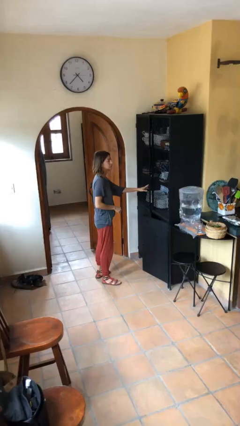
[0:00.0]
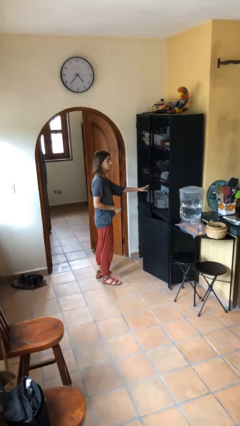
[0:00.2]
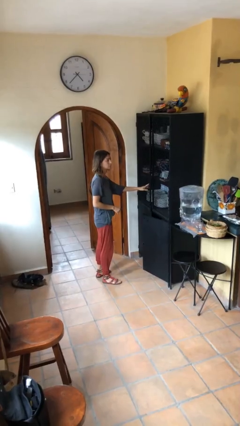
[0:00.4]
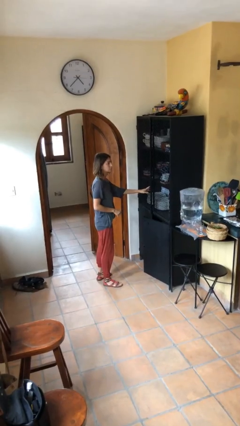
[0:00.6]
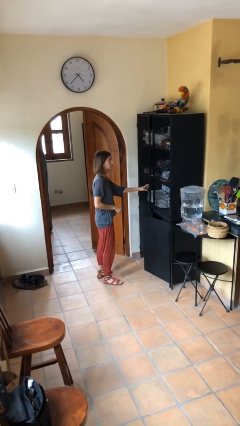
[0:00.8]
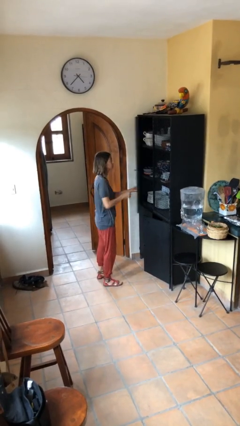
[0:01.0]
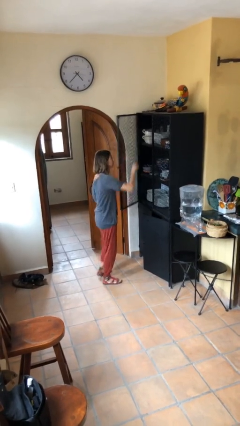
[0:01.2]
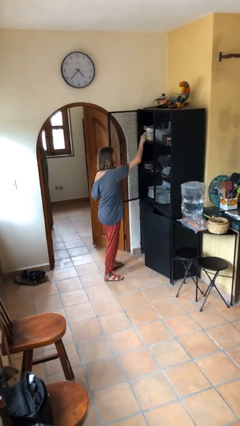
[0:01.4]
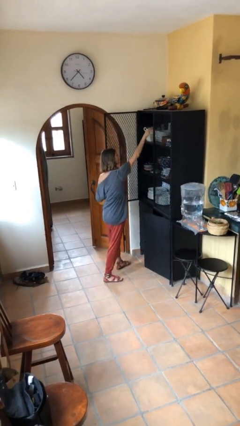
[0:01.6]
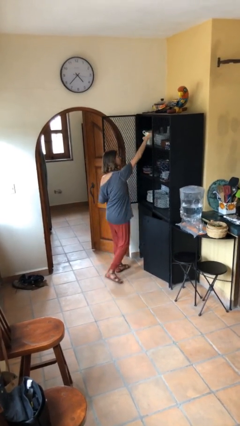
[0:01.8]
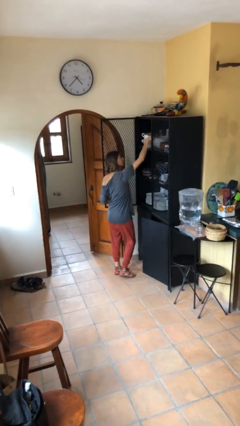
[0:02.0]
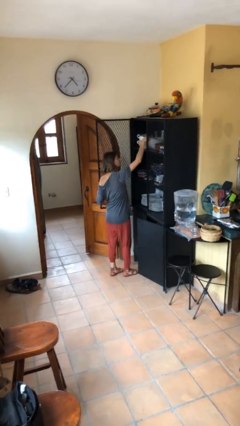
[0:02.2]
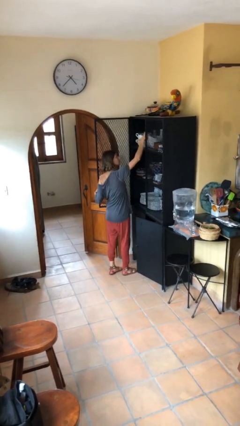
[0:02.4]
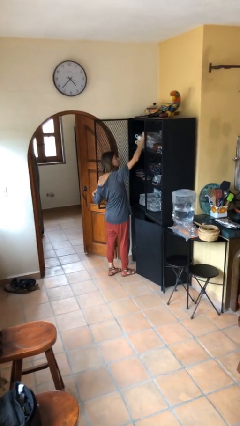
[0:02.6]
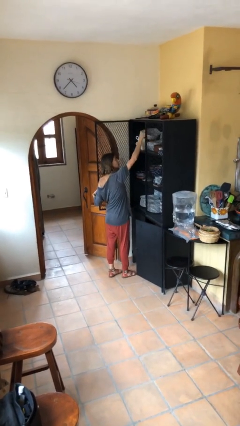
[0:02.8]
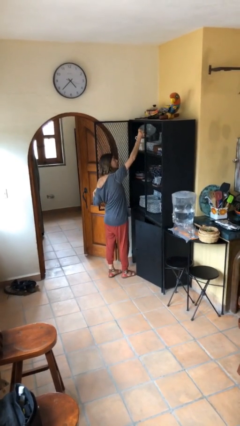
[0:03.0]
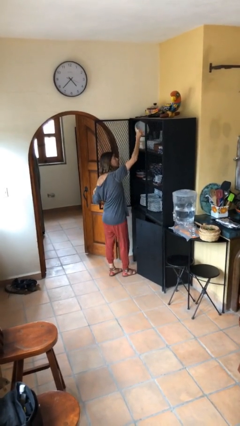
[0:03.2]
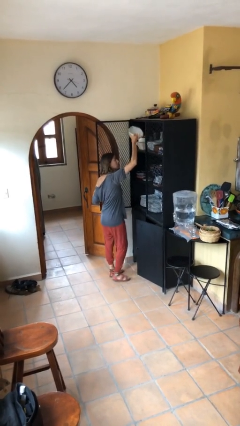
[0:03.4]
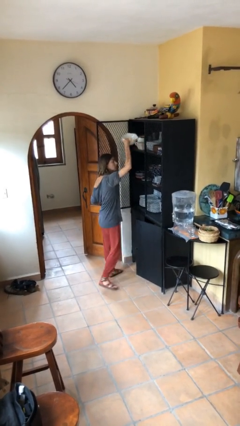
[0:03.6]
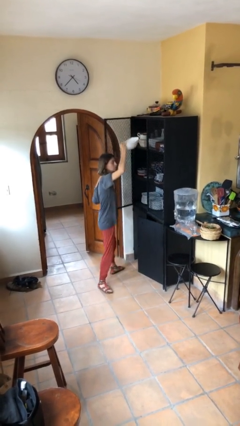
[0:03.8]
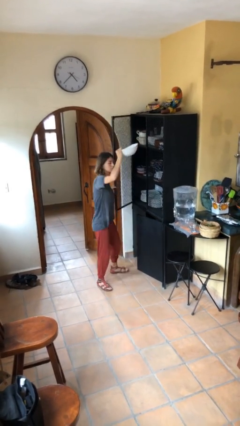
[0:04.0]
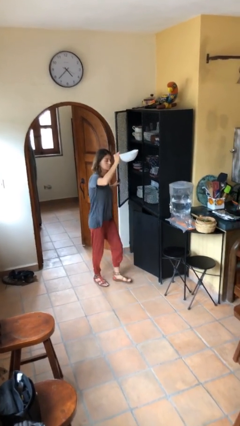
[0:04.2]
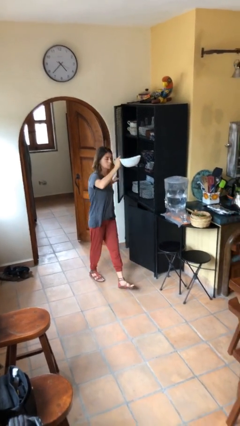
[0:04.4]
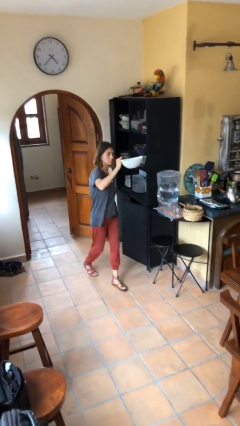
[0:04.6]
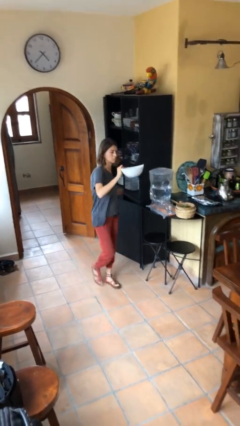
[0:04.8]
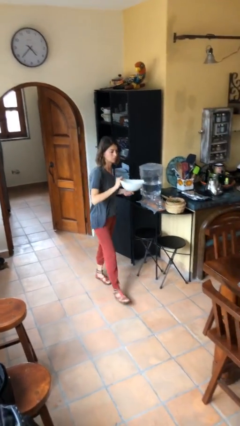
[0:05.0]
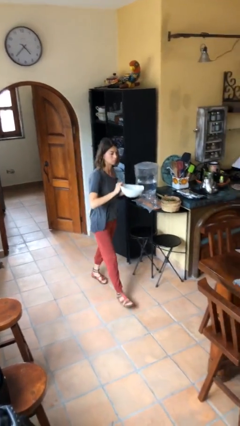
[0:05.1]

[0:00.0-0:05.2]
person picks up object from shelf

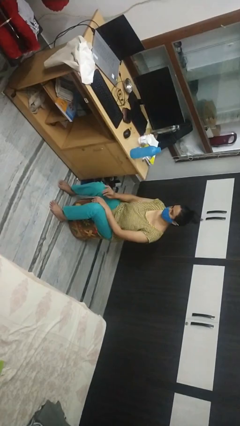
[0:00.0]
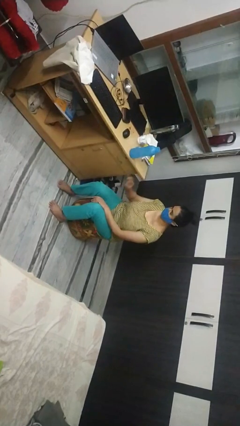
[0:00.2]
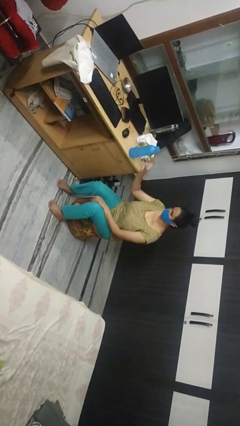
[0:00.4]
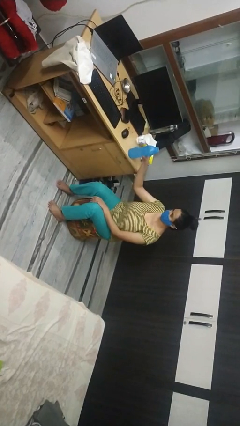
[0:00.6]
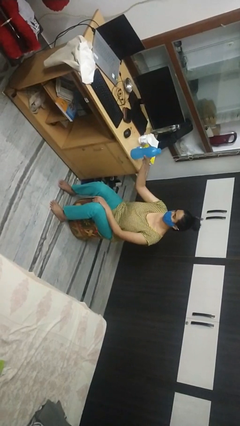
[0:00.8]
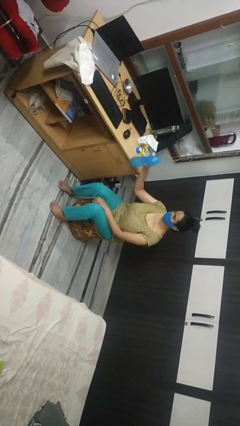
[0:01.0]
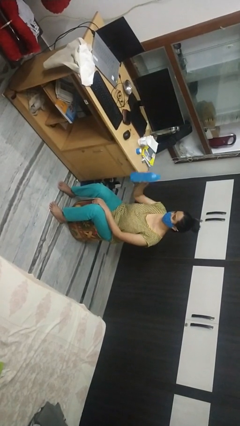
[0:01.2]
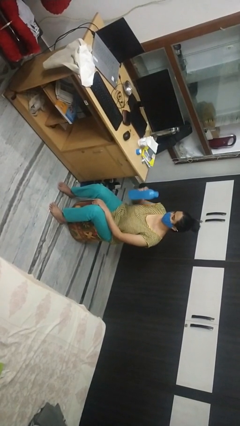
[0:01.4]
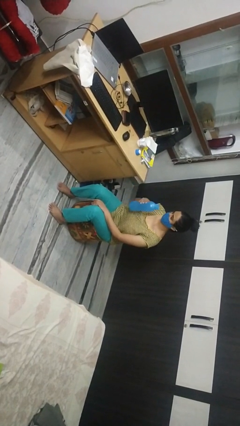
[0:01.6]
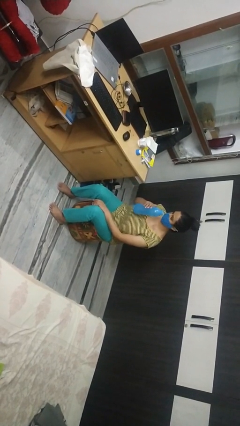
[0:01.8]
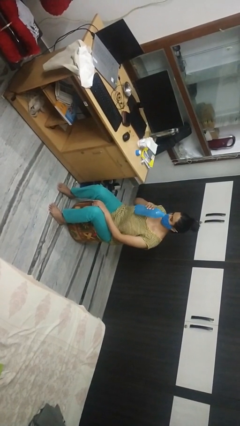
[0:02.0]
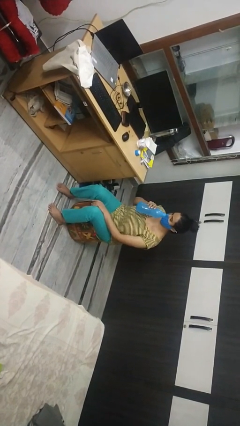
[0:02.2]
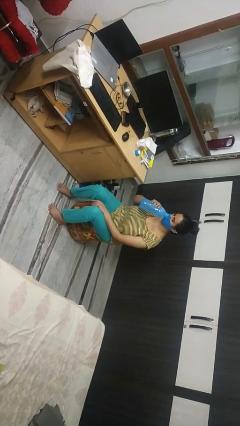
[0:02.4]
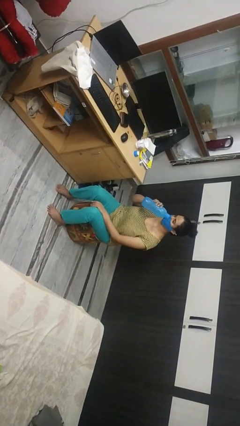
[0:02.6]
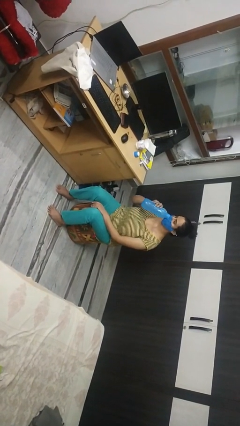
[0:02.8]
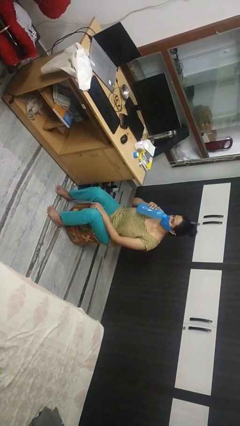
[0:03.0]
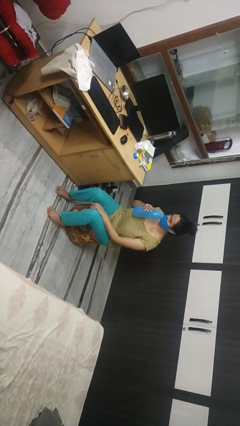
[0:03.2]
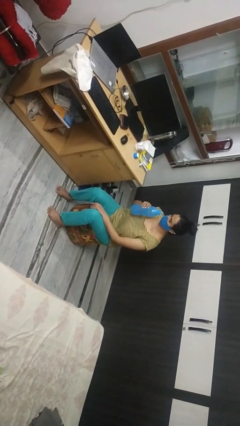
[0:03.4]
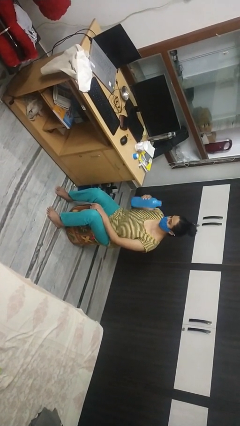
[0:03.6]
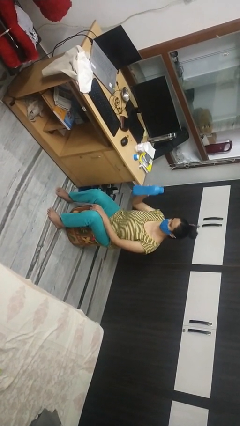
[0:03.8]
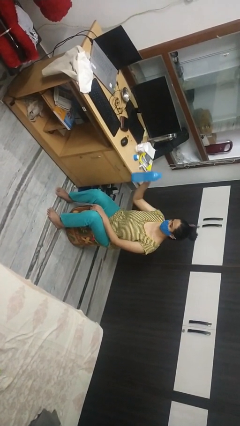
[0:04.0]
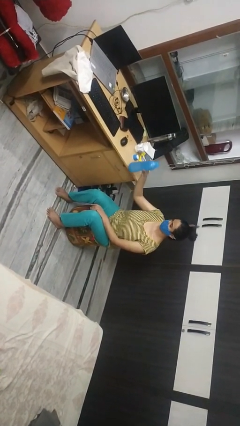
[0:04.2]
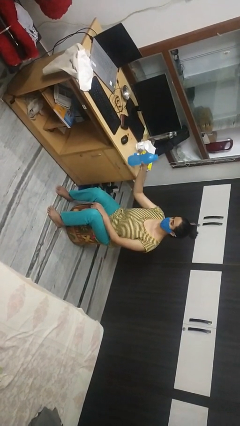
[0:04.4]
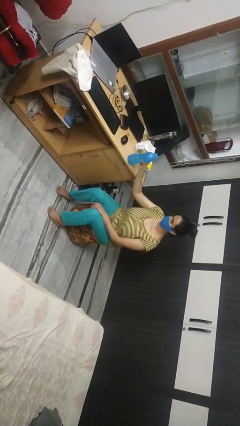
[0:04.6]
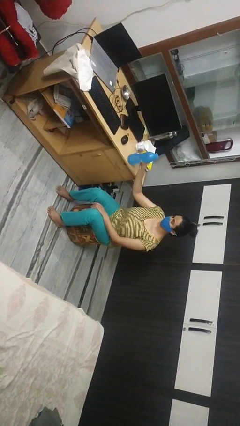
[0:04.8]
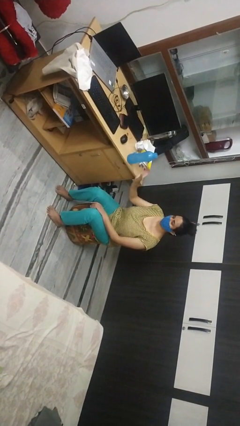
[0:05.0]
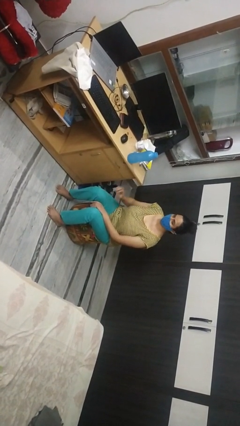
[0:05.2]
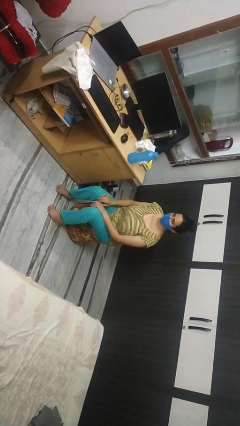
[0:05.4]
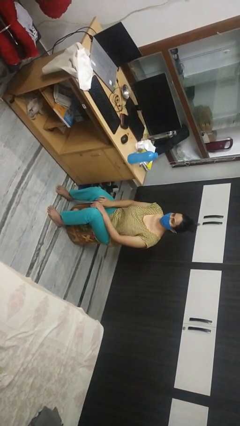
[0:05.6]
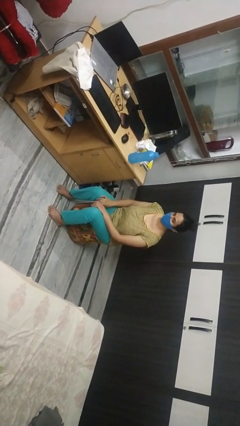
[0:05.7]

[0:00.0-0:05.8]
person drinks from bottle

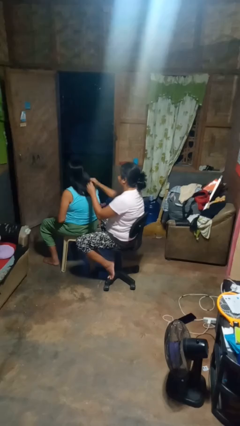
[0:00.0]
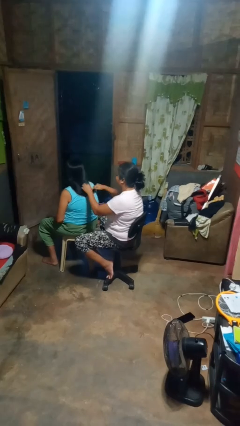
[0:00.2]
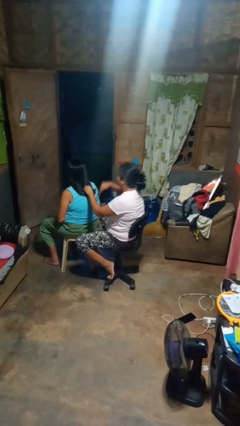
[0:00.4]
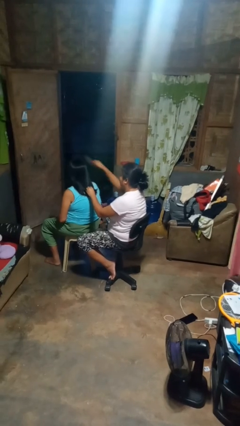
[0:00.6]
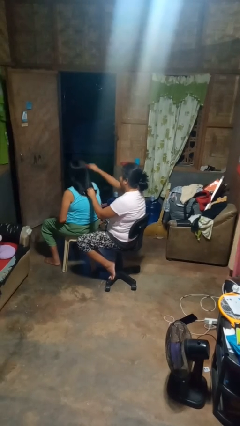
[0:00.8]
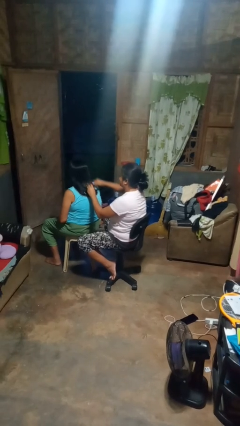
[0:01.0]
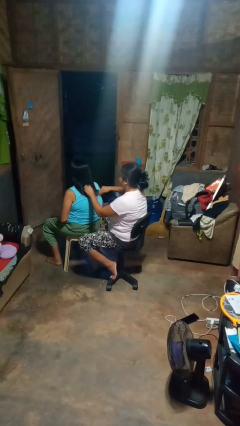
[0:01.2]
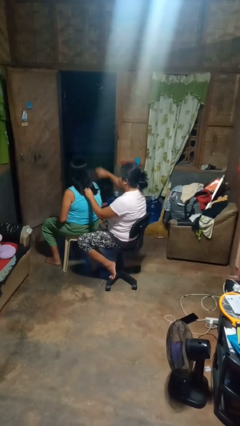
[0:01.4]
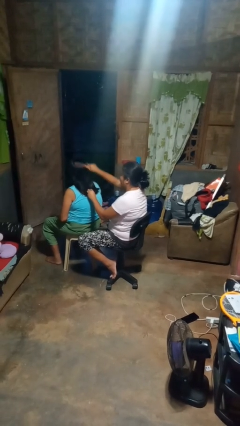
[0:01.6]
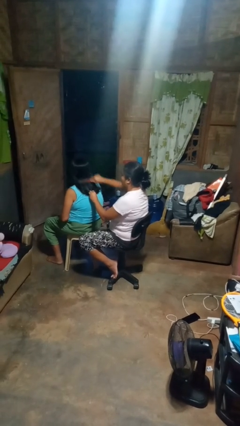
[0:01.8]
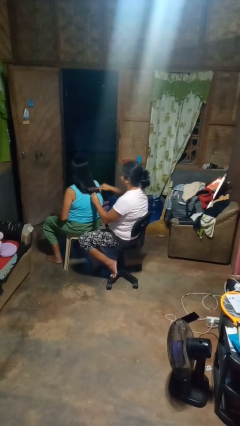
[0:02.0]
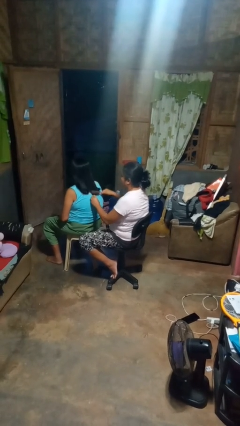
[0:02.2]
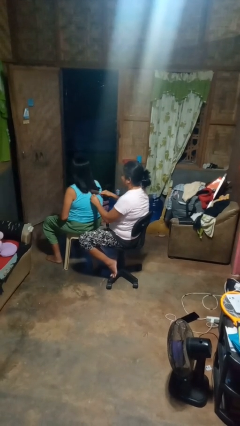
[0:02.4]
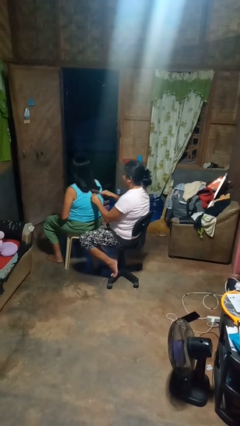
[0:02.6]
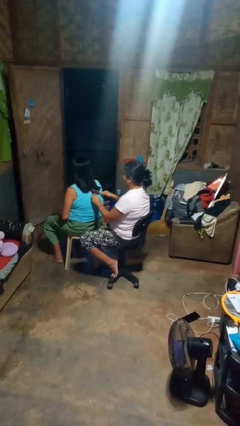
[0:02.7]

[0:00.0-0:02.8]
person brushes hair of person

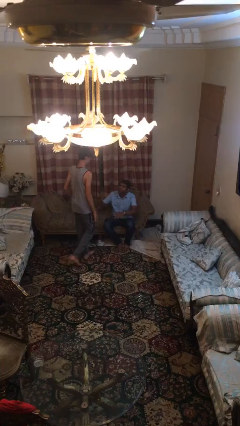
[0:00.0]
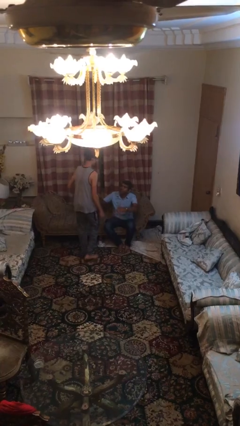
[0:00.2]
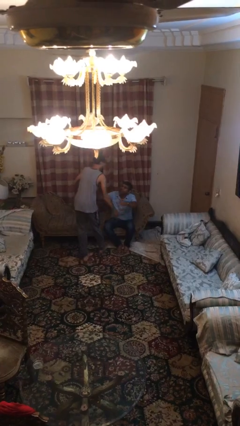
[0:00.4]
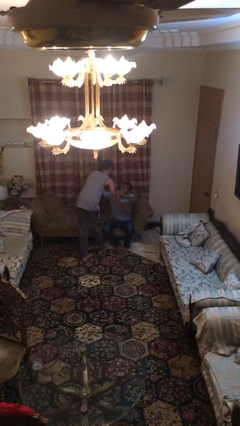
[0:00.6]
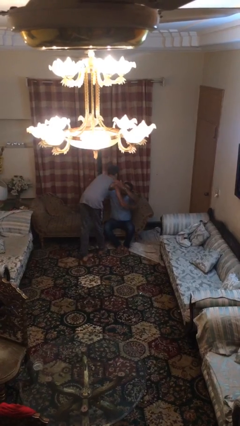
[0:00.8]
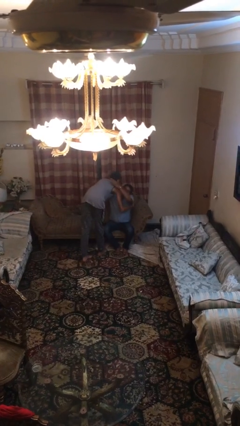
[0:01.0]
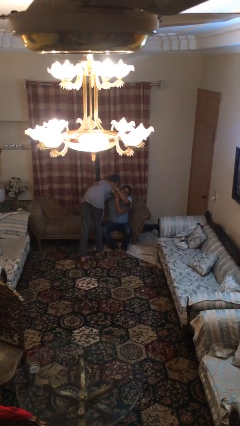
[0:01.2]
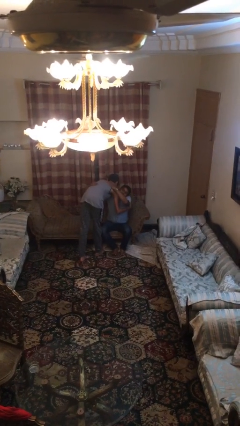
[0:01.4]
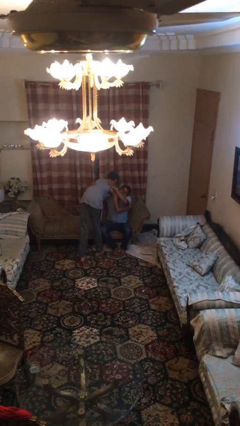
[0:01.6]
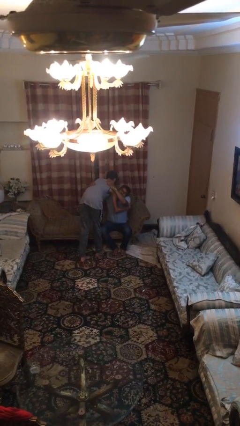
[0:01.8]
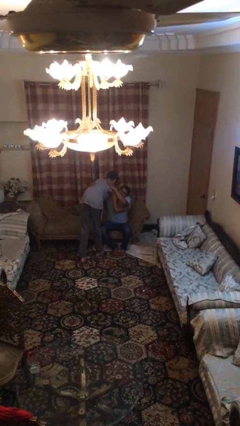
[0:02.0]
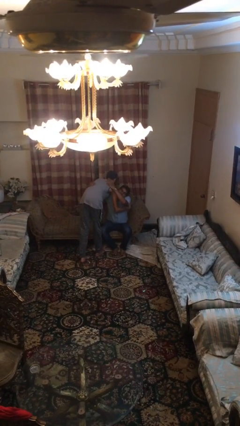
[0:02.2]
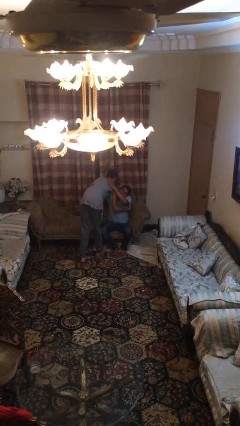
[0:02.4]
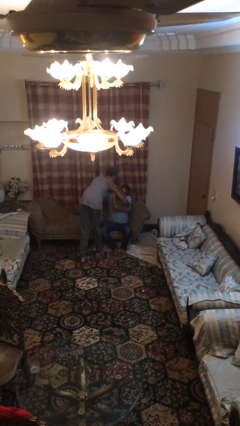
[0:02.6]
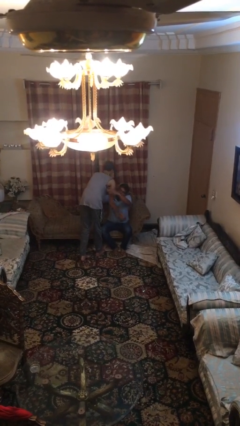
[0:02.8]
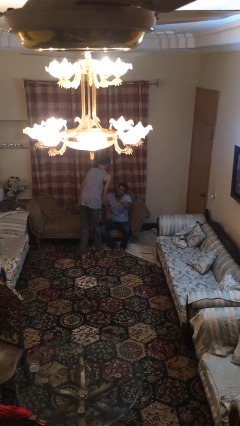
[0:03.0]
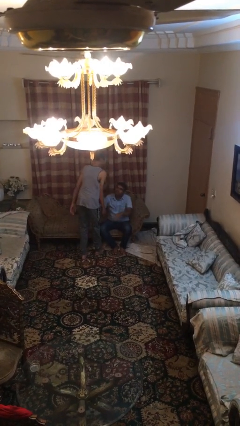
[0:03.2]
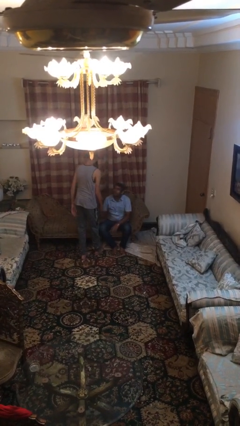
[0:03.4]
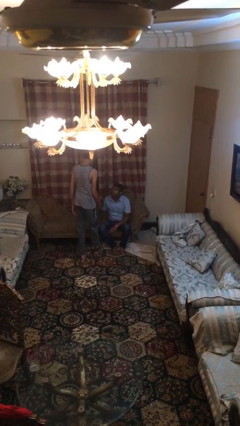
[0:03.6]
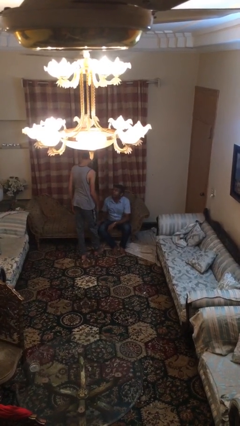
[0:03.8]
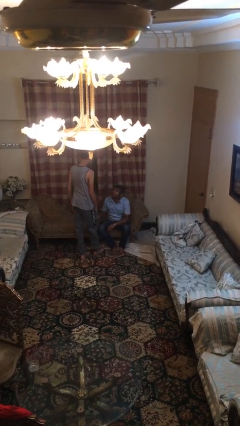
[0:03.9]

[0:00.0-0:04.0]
person embraces person

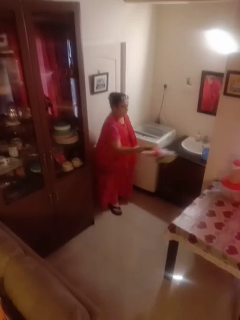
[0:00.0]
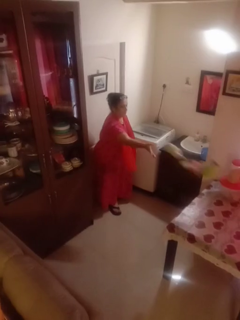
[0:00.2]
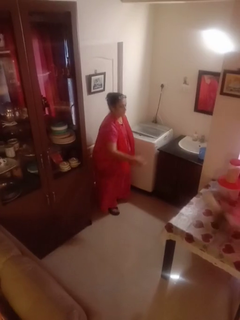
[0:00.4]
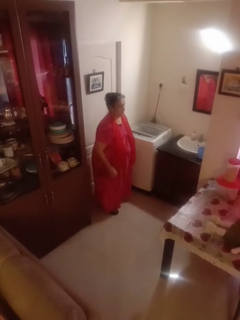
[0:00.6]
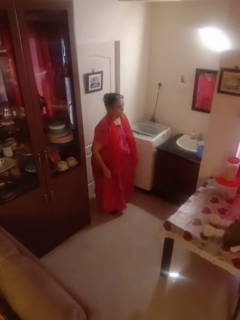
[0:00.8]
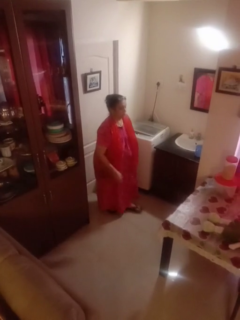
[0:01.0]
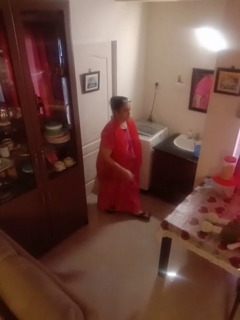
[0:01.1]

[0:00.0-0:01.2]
person throws object on table